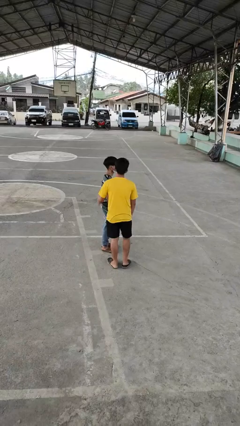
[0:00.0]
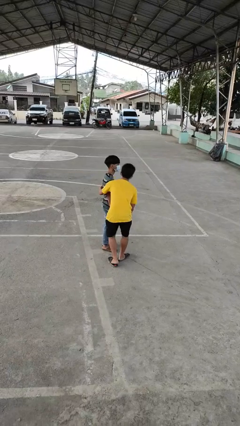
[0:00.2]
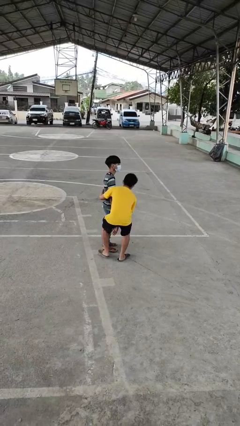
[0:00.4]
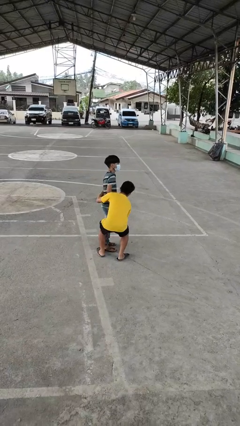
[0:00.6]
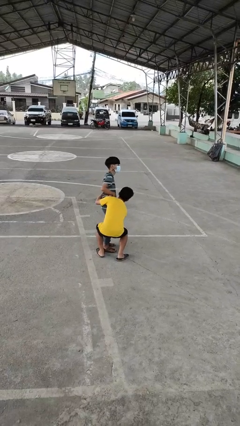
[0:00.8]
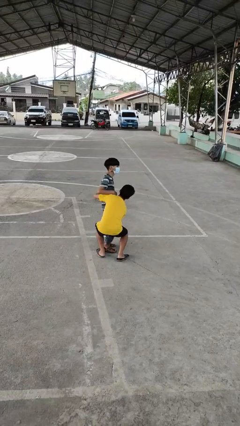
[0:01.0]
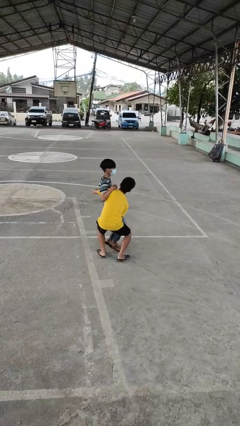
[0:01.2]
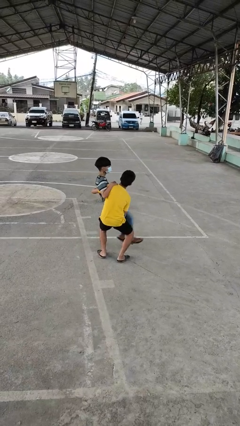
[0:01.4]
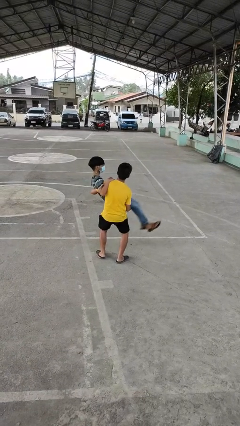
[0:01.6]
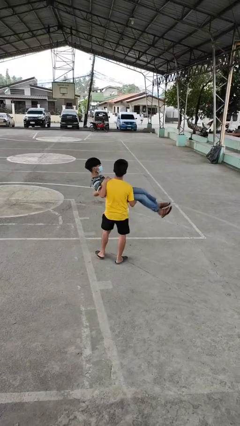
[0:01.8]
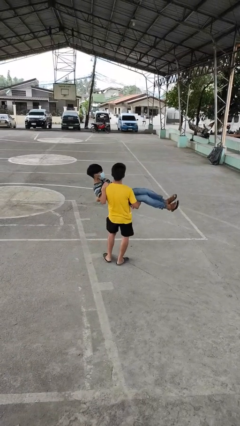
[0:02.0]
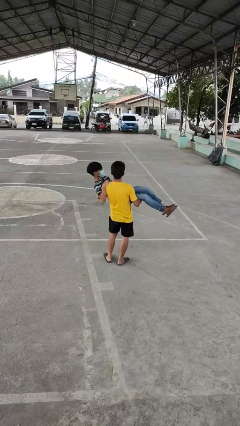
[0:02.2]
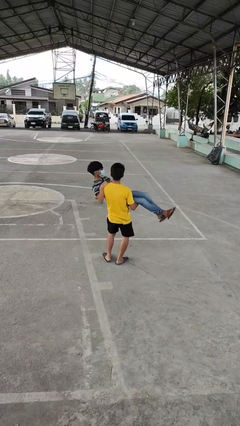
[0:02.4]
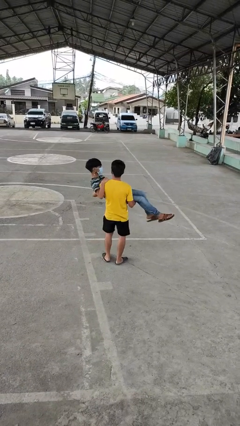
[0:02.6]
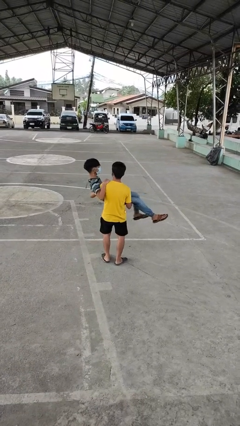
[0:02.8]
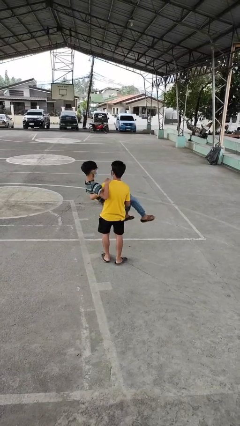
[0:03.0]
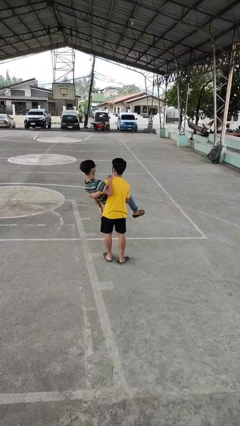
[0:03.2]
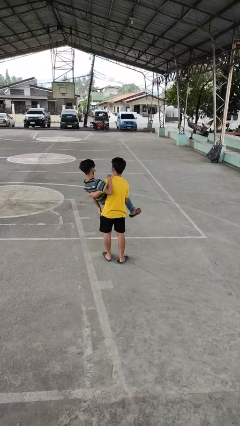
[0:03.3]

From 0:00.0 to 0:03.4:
person picks up person

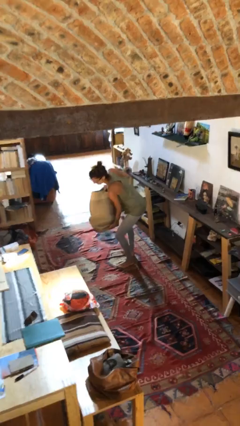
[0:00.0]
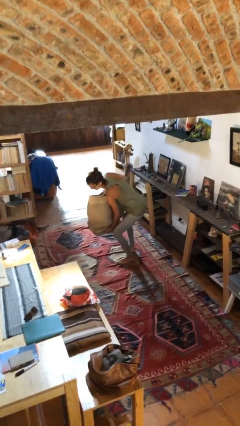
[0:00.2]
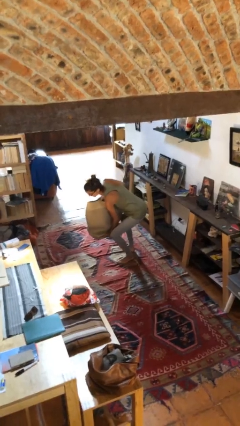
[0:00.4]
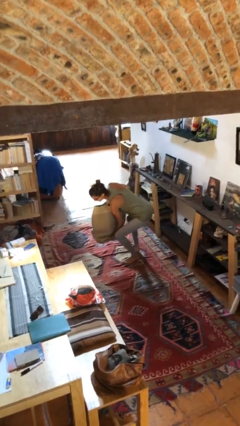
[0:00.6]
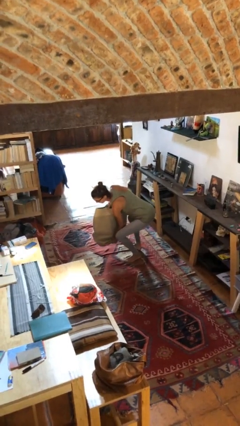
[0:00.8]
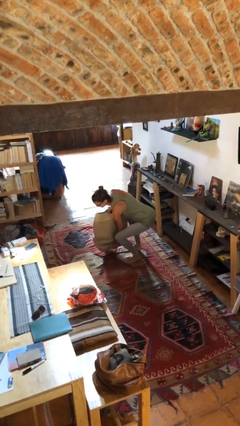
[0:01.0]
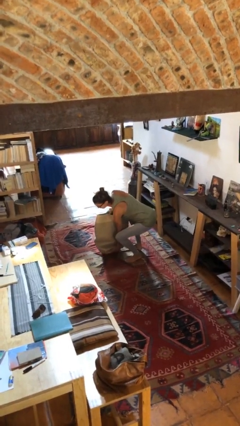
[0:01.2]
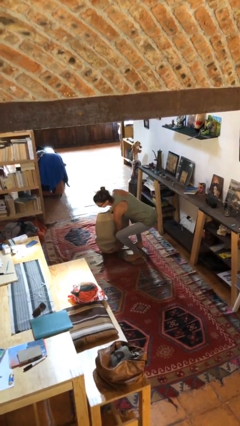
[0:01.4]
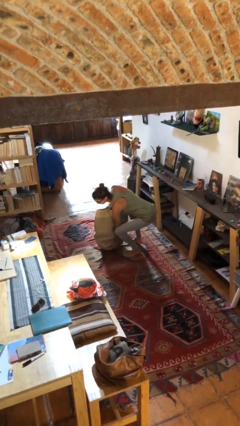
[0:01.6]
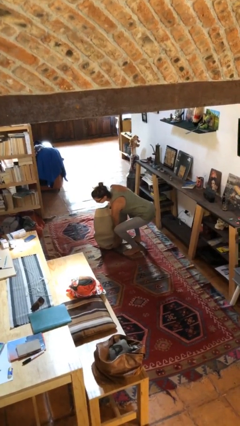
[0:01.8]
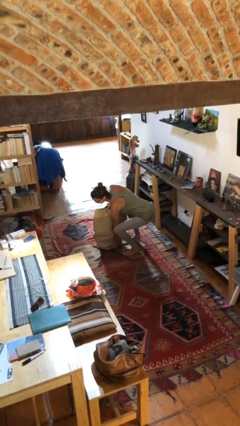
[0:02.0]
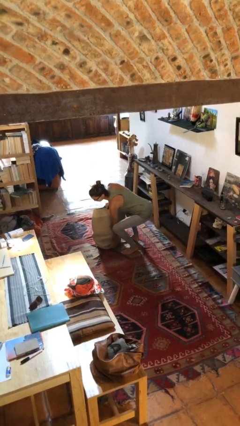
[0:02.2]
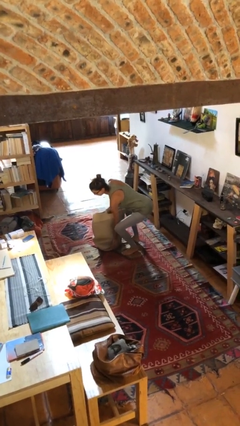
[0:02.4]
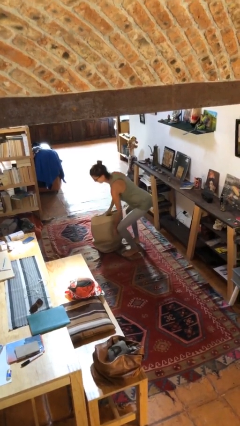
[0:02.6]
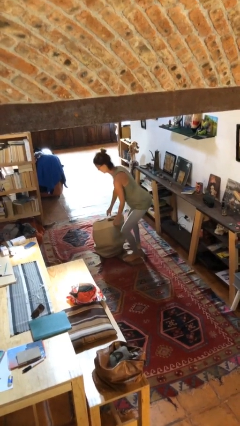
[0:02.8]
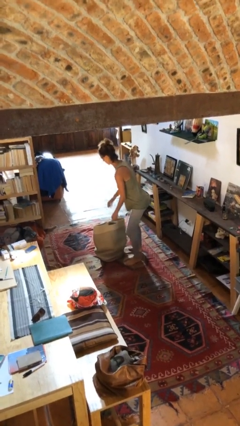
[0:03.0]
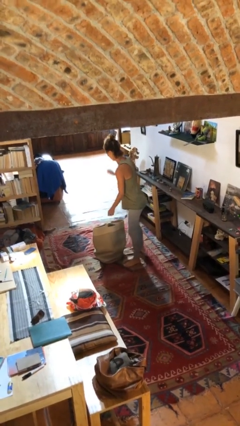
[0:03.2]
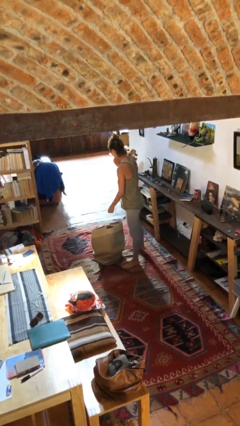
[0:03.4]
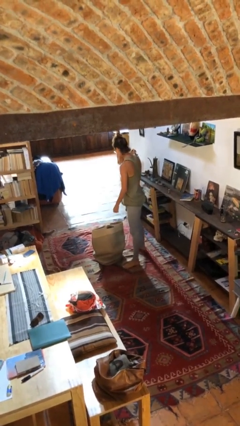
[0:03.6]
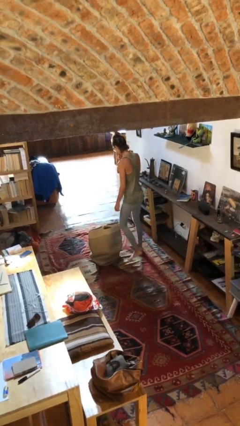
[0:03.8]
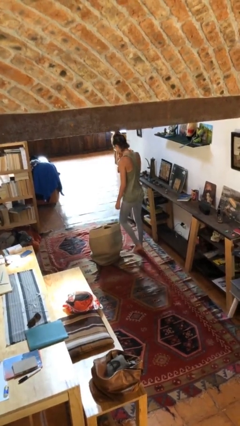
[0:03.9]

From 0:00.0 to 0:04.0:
person puts down object on floor

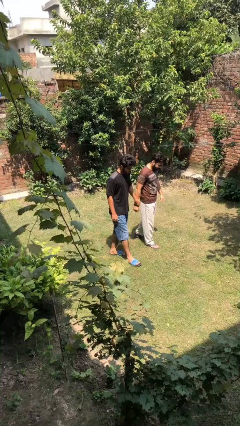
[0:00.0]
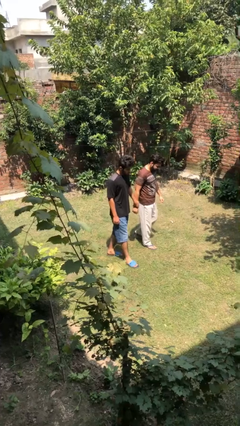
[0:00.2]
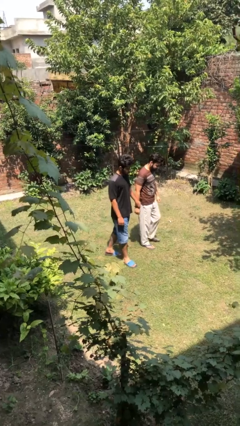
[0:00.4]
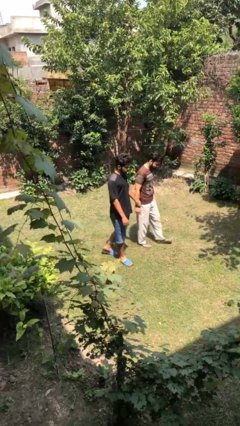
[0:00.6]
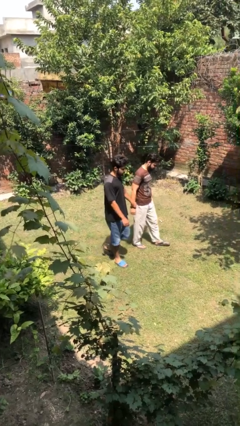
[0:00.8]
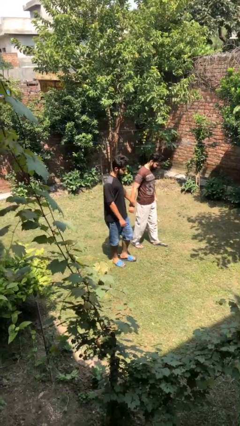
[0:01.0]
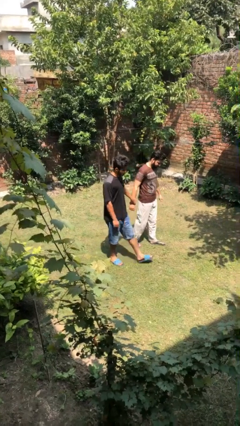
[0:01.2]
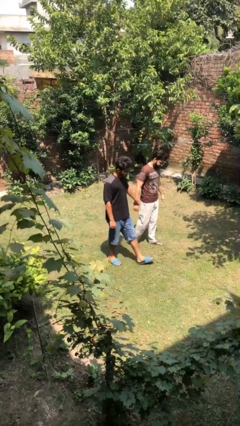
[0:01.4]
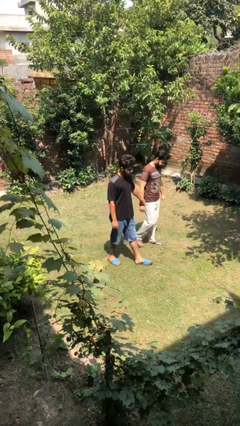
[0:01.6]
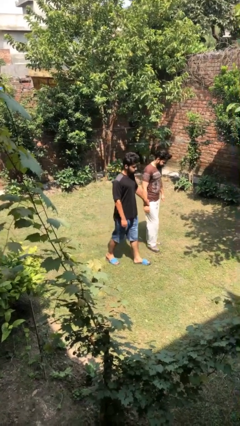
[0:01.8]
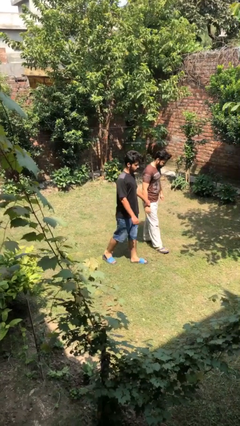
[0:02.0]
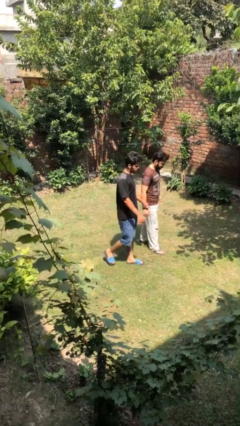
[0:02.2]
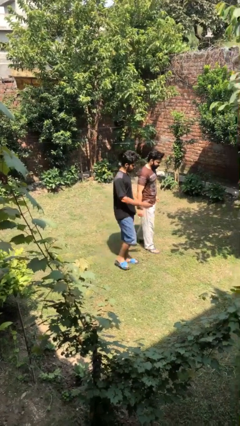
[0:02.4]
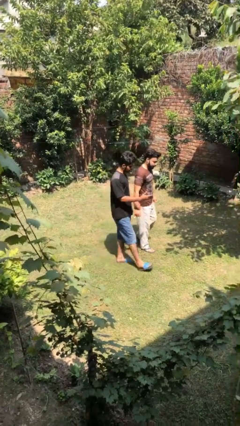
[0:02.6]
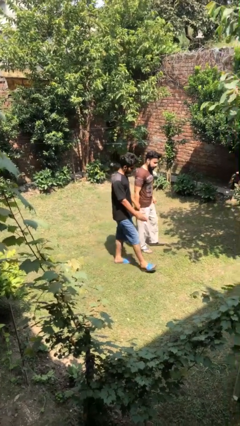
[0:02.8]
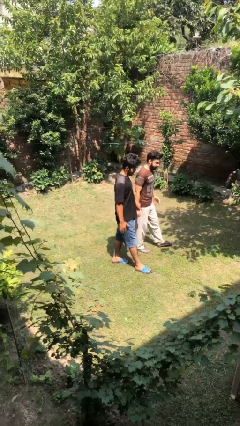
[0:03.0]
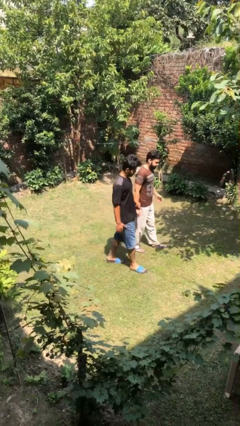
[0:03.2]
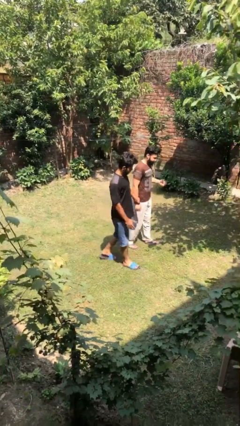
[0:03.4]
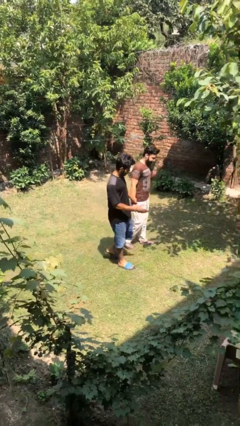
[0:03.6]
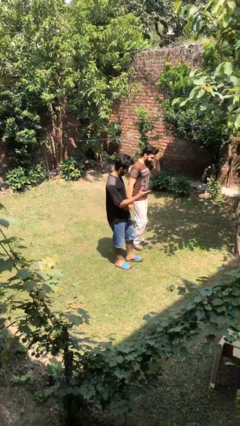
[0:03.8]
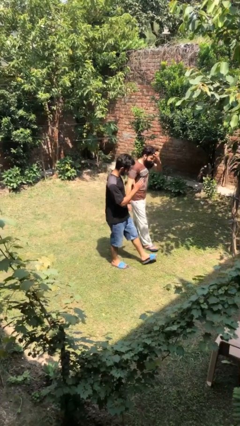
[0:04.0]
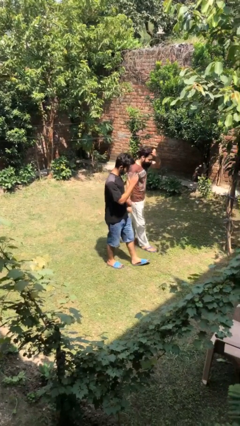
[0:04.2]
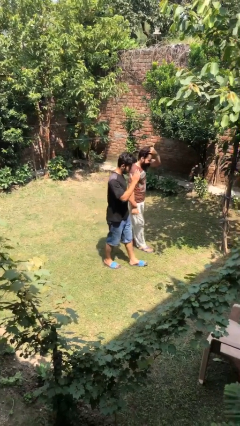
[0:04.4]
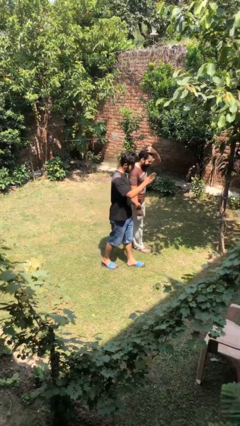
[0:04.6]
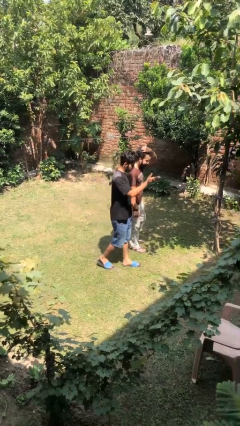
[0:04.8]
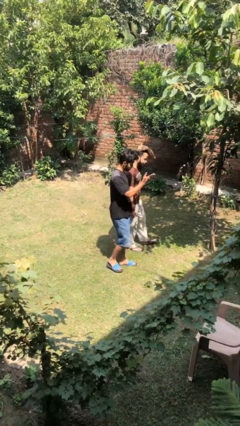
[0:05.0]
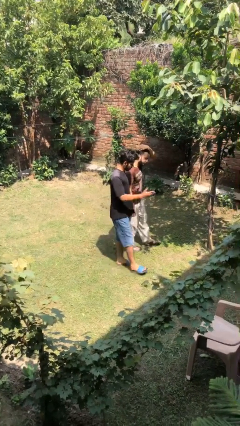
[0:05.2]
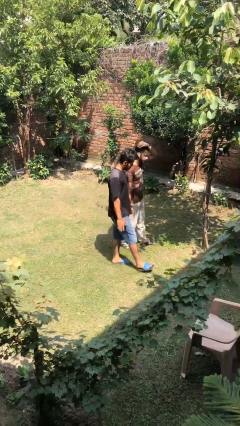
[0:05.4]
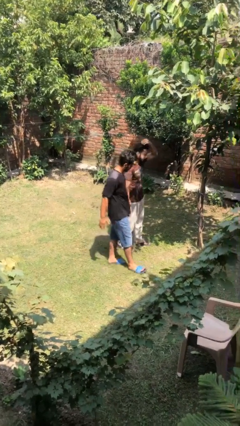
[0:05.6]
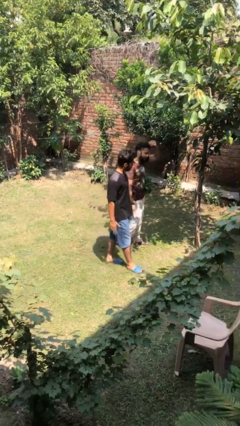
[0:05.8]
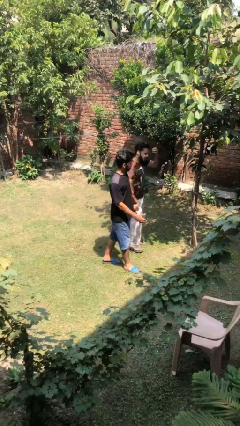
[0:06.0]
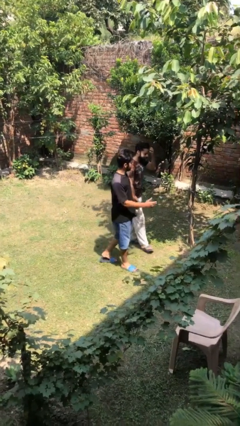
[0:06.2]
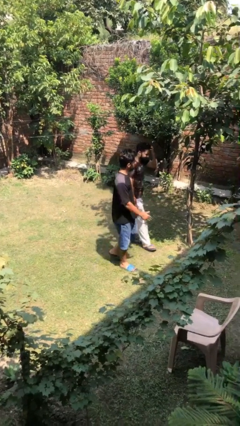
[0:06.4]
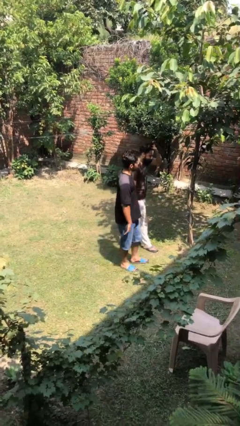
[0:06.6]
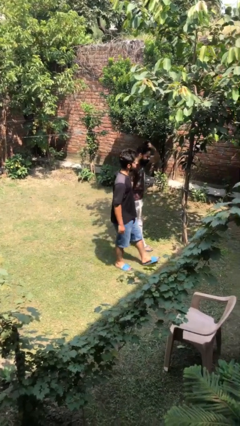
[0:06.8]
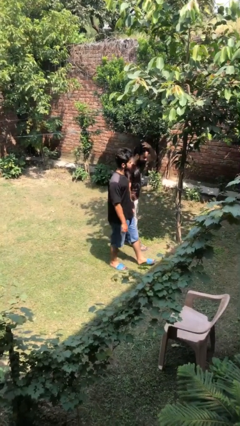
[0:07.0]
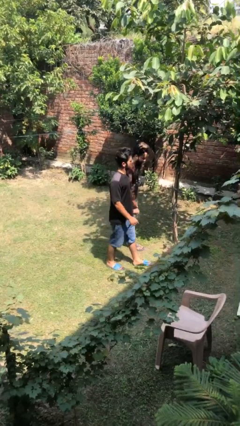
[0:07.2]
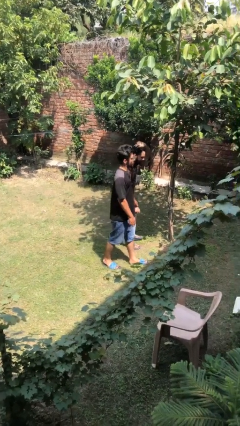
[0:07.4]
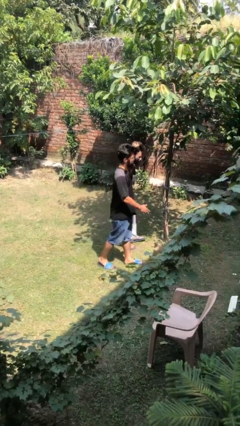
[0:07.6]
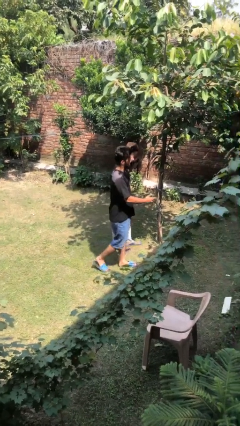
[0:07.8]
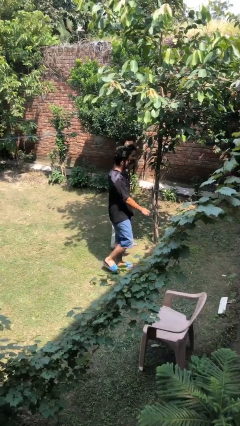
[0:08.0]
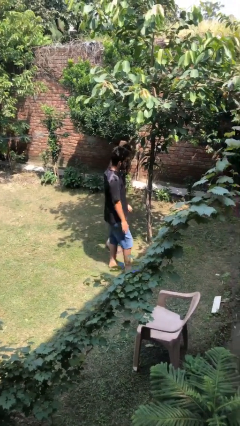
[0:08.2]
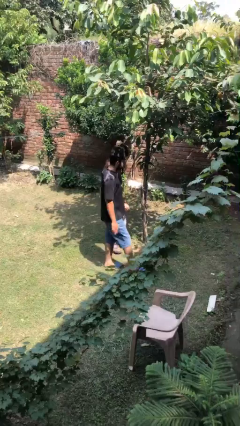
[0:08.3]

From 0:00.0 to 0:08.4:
person holds hand

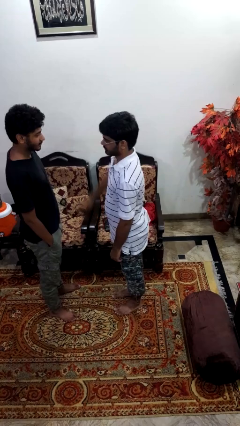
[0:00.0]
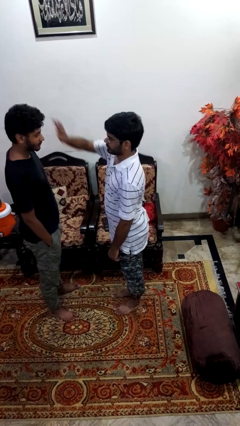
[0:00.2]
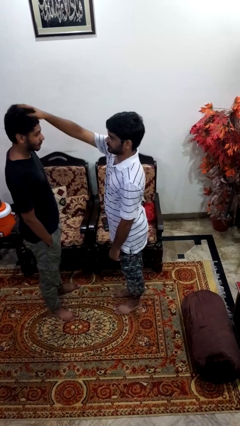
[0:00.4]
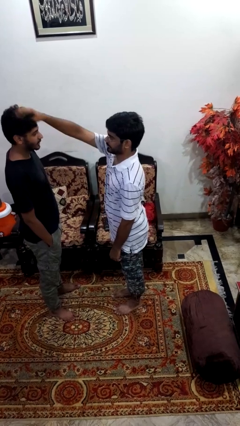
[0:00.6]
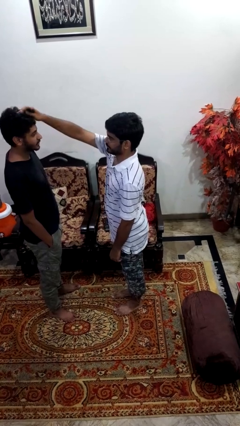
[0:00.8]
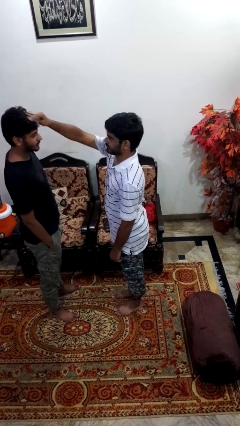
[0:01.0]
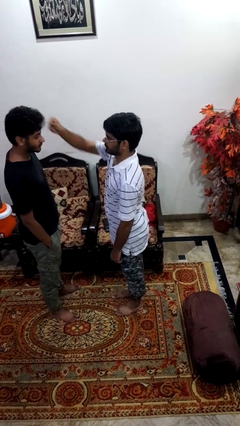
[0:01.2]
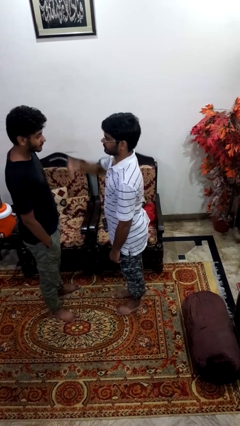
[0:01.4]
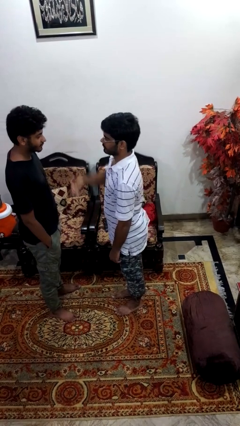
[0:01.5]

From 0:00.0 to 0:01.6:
person grabs person by hair

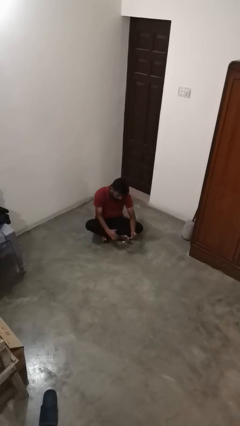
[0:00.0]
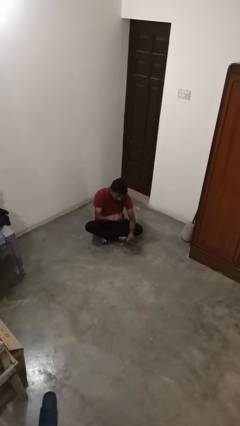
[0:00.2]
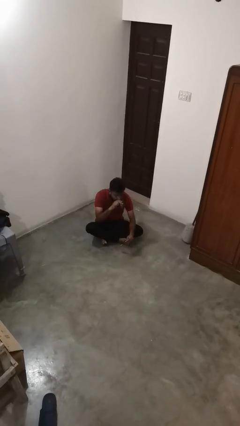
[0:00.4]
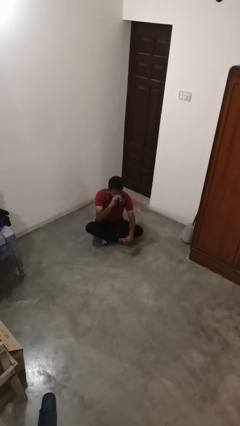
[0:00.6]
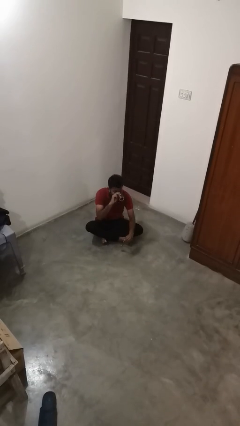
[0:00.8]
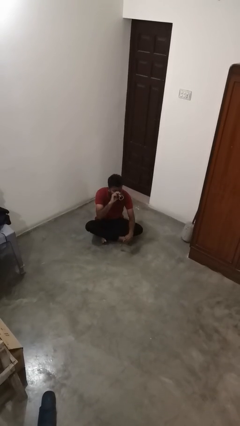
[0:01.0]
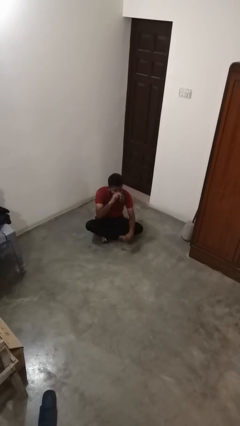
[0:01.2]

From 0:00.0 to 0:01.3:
person drinks from mug
